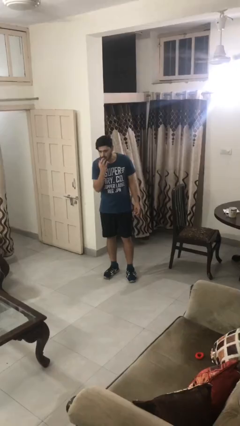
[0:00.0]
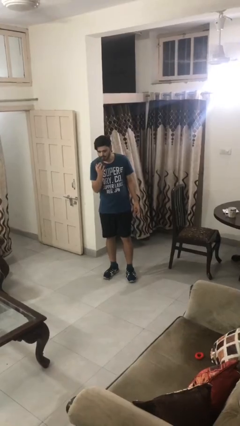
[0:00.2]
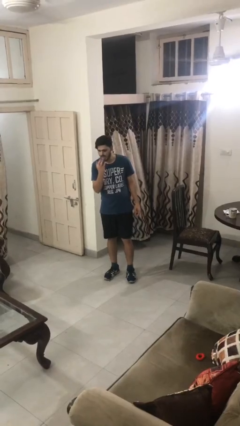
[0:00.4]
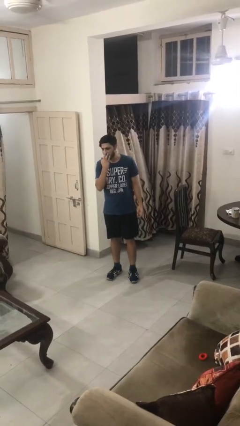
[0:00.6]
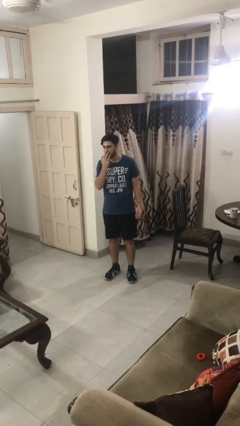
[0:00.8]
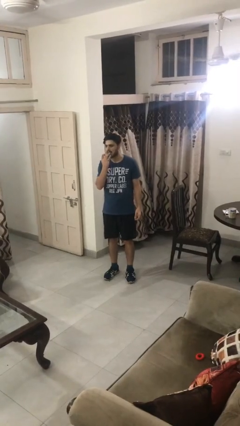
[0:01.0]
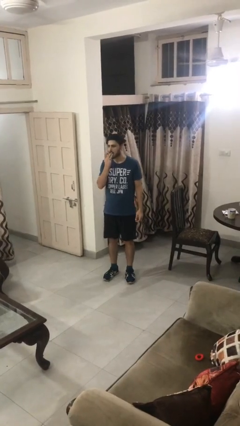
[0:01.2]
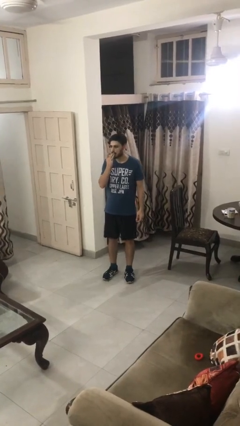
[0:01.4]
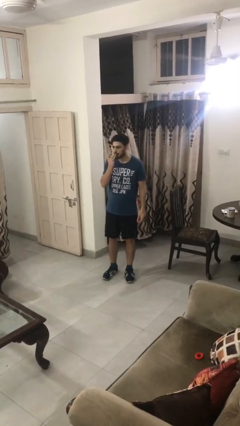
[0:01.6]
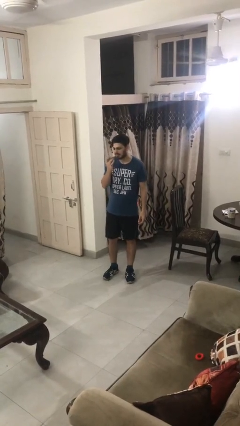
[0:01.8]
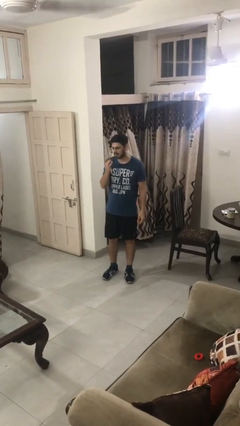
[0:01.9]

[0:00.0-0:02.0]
person licks fingers

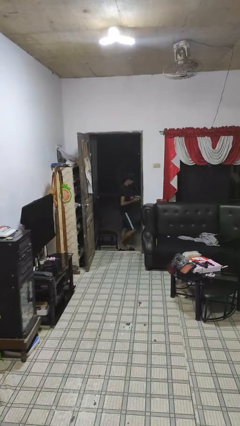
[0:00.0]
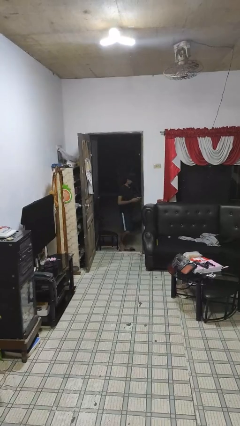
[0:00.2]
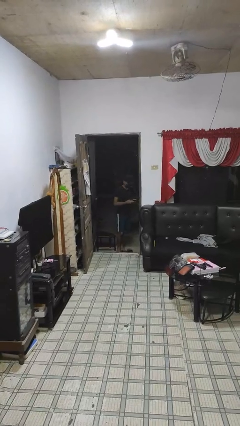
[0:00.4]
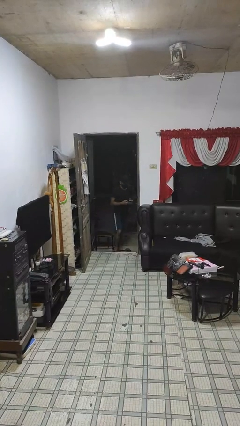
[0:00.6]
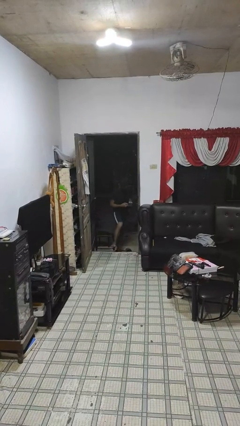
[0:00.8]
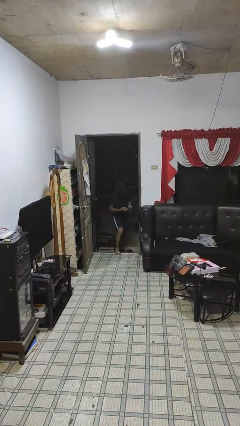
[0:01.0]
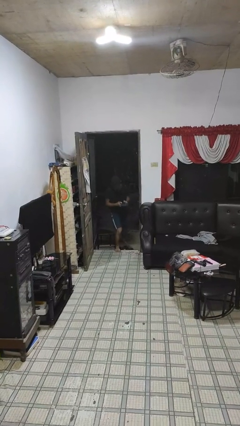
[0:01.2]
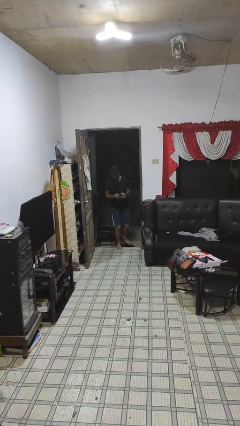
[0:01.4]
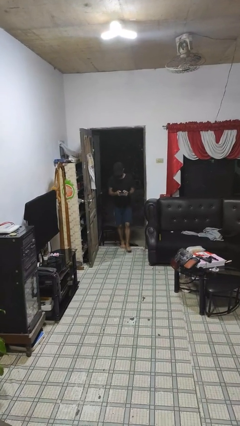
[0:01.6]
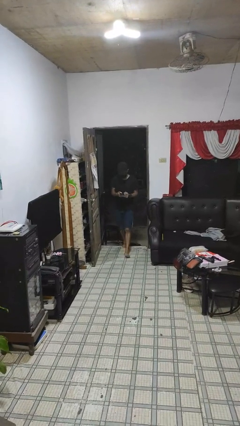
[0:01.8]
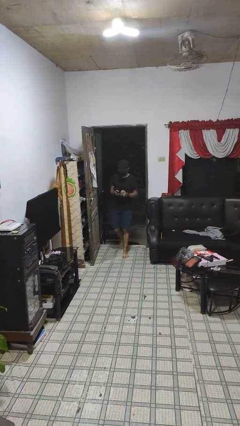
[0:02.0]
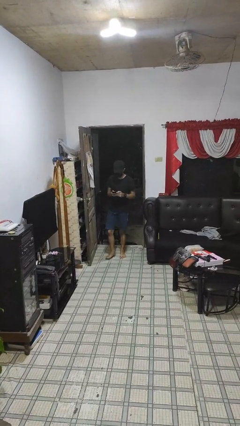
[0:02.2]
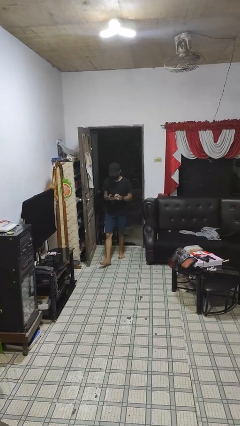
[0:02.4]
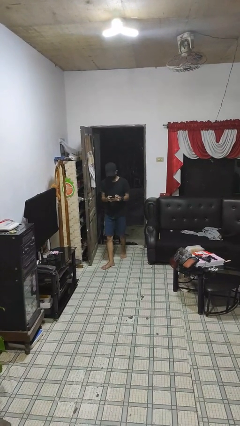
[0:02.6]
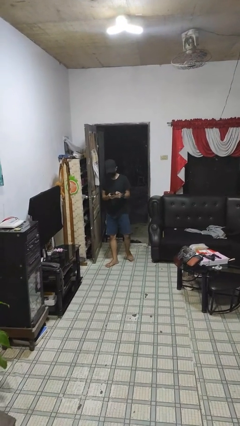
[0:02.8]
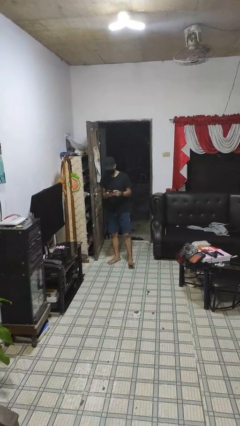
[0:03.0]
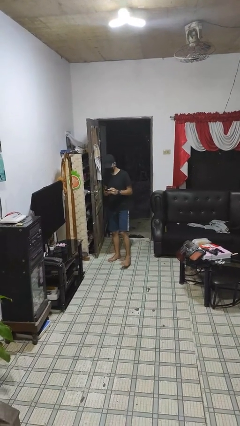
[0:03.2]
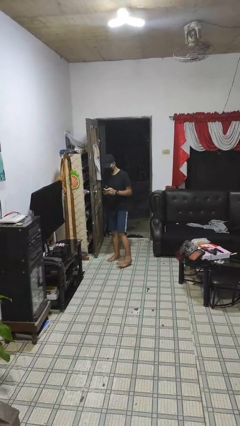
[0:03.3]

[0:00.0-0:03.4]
person enters scene through structure

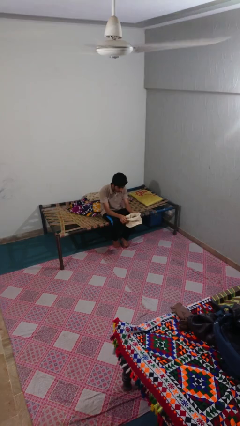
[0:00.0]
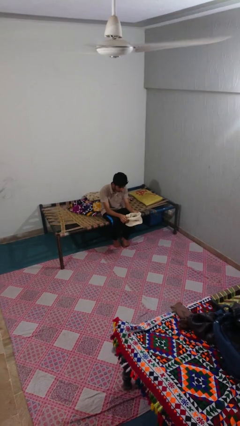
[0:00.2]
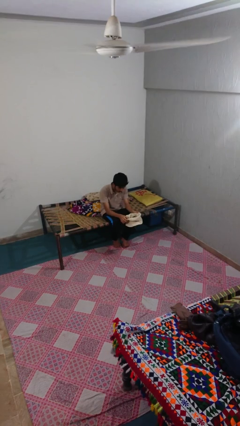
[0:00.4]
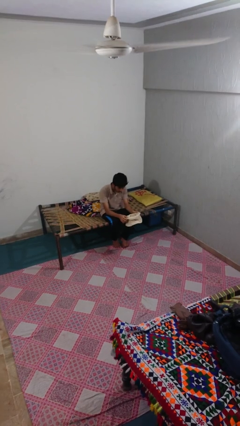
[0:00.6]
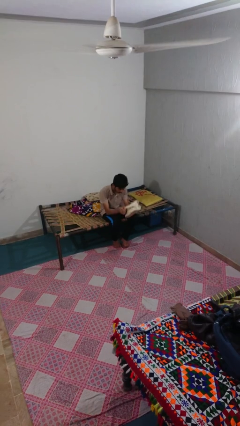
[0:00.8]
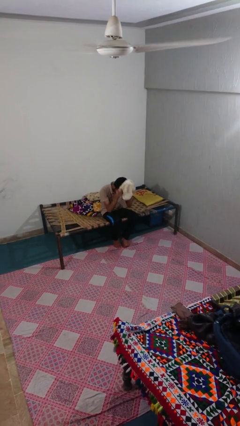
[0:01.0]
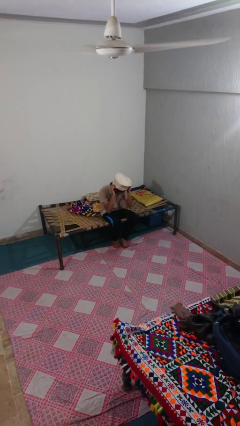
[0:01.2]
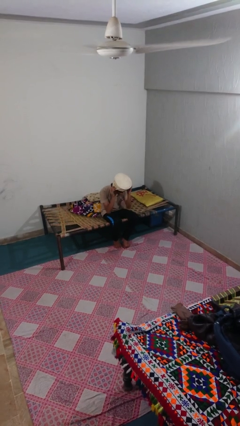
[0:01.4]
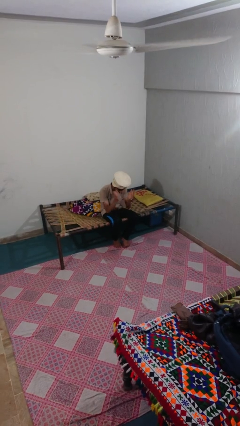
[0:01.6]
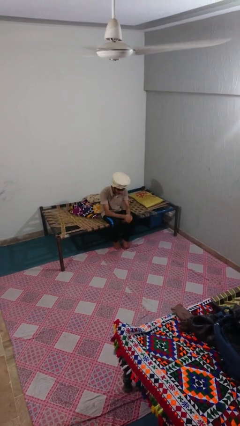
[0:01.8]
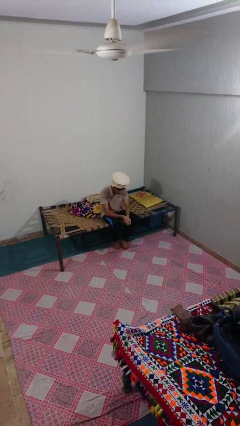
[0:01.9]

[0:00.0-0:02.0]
person puts on hat

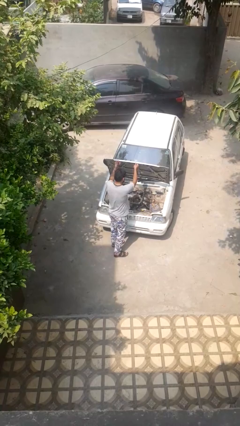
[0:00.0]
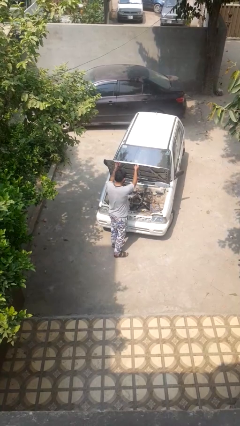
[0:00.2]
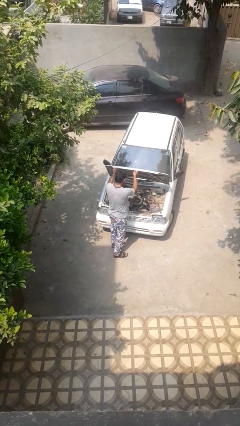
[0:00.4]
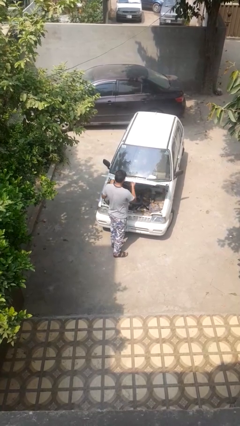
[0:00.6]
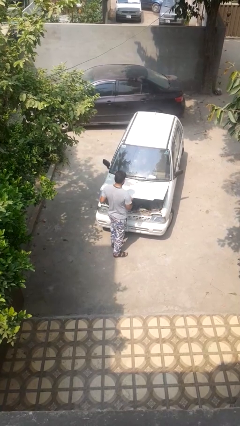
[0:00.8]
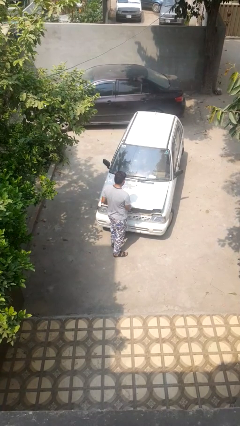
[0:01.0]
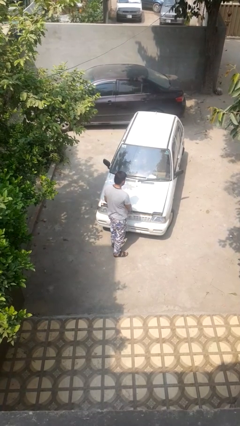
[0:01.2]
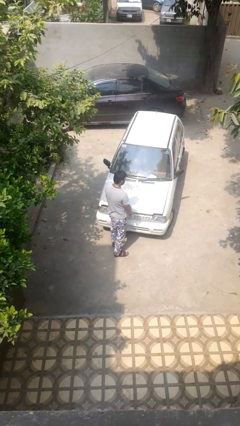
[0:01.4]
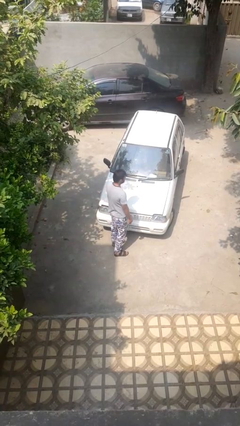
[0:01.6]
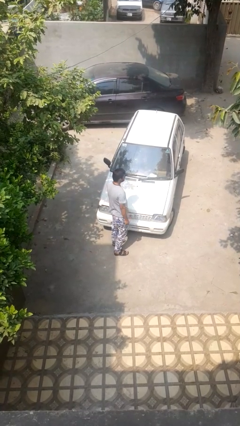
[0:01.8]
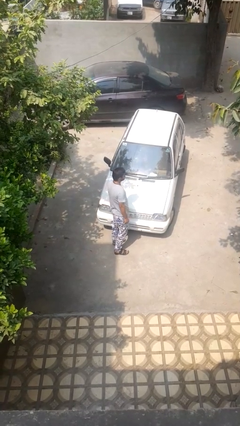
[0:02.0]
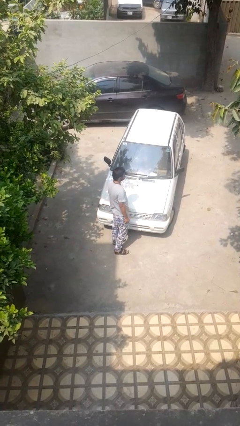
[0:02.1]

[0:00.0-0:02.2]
person closes car hood

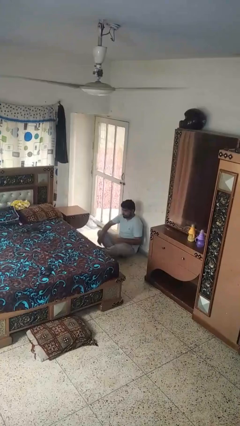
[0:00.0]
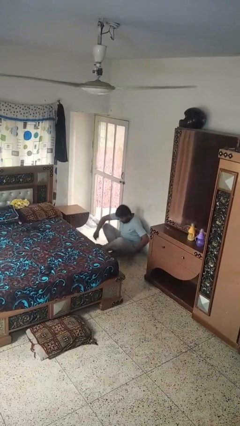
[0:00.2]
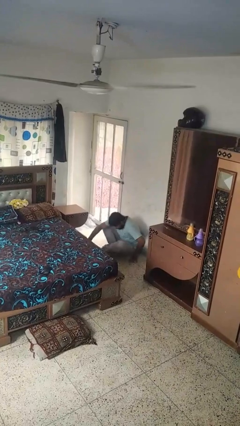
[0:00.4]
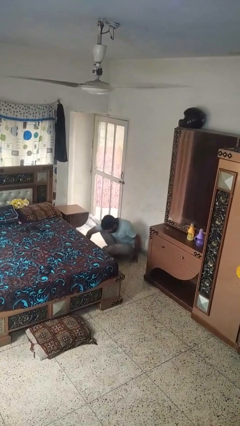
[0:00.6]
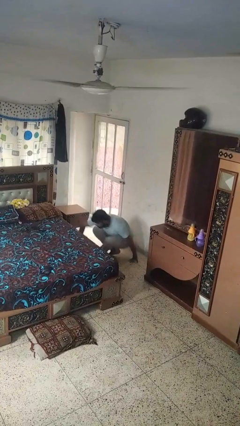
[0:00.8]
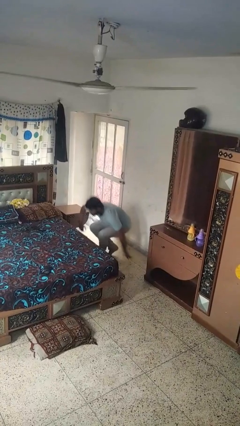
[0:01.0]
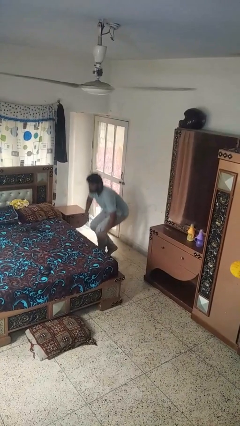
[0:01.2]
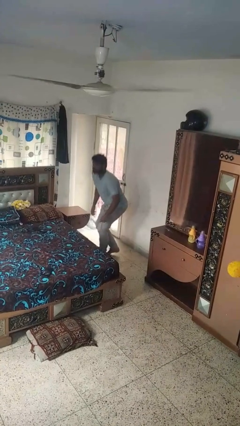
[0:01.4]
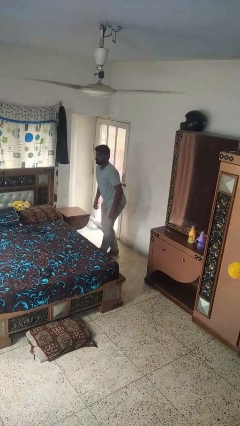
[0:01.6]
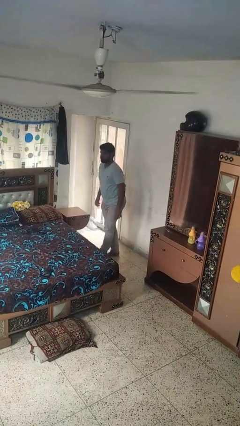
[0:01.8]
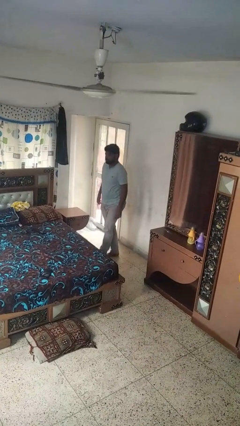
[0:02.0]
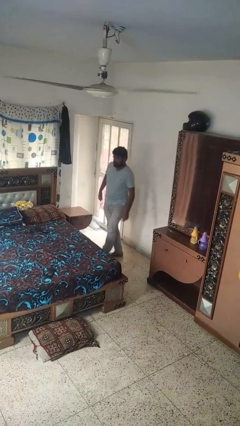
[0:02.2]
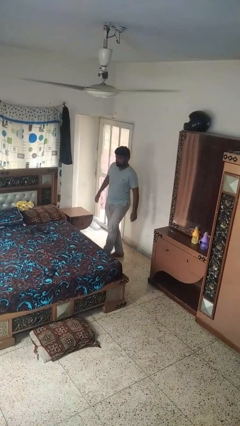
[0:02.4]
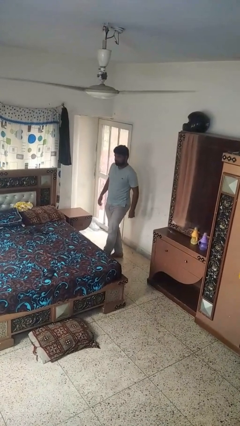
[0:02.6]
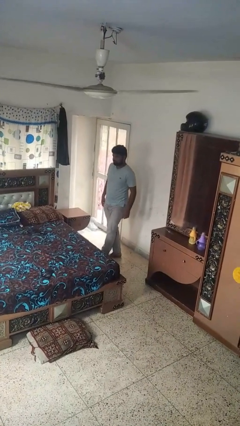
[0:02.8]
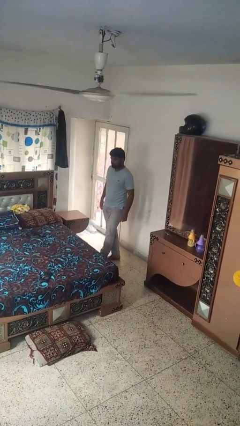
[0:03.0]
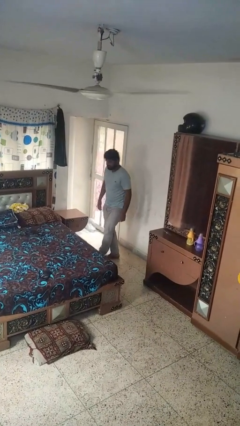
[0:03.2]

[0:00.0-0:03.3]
person stands up from floor

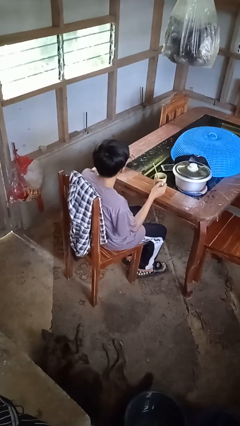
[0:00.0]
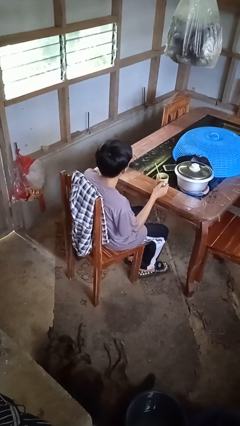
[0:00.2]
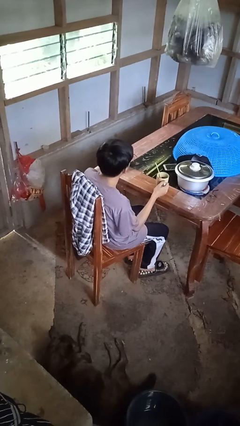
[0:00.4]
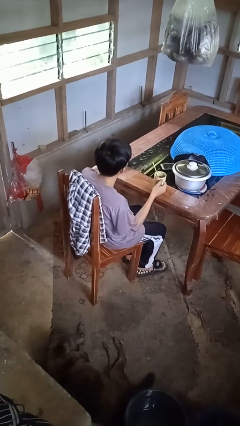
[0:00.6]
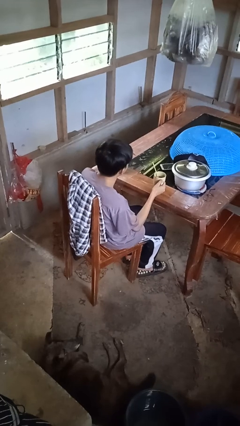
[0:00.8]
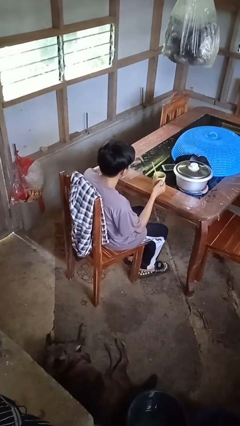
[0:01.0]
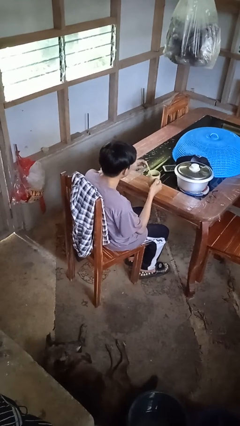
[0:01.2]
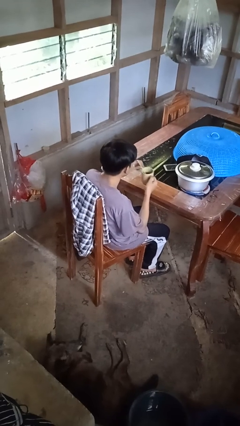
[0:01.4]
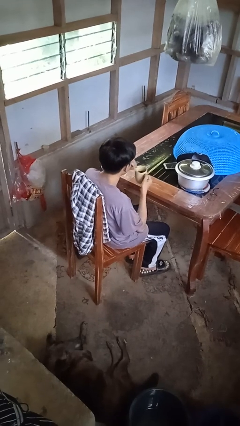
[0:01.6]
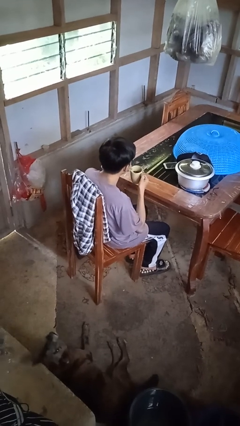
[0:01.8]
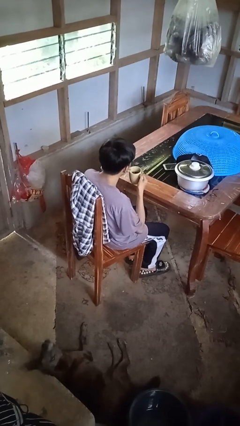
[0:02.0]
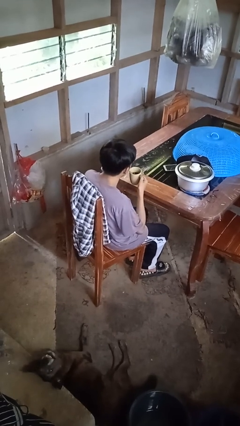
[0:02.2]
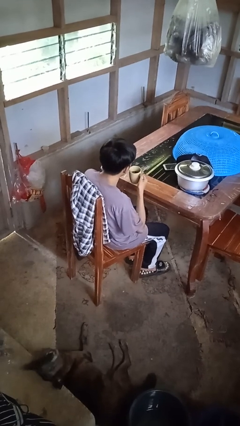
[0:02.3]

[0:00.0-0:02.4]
person drinks from straw

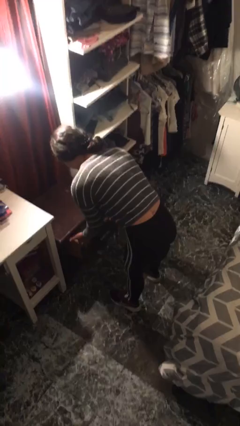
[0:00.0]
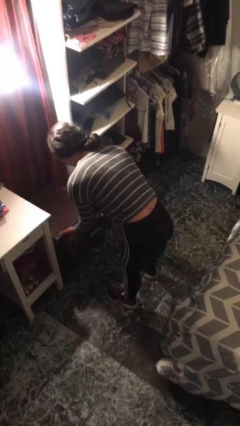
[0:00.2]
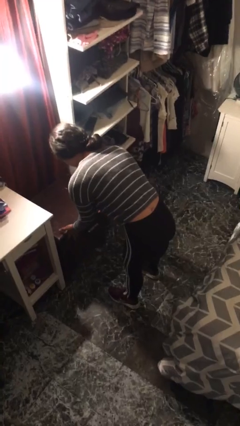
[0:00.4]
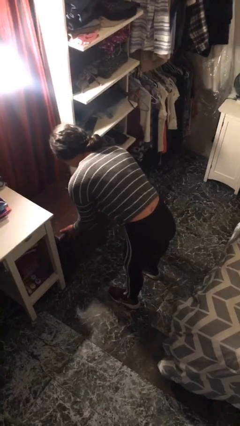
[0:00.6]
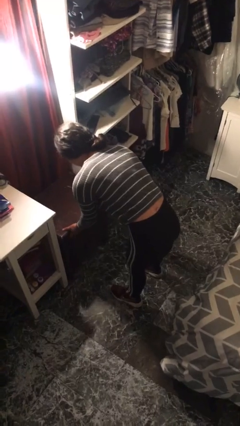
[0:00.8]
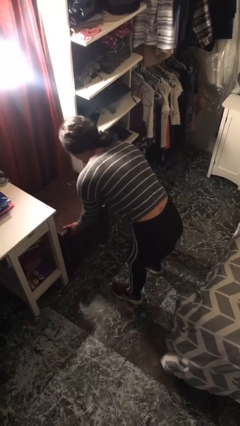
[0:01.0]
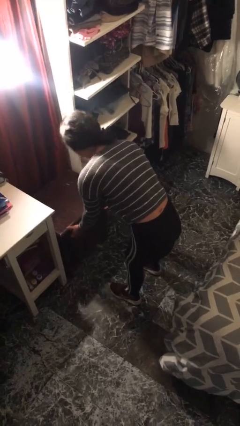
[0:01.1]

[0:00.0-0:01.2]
person closes dresser drawer

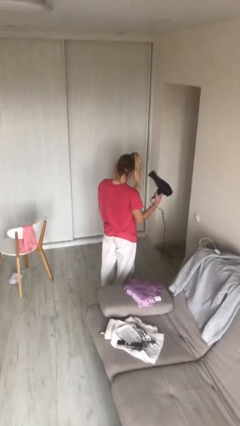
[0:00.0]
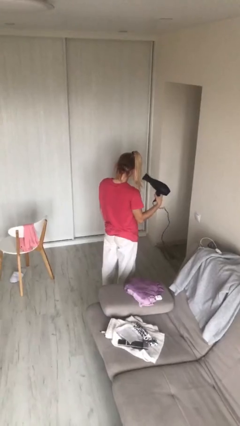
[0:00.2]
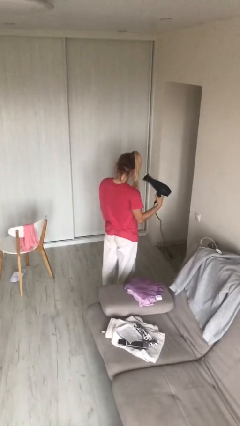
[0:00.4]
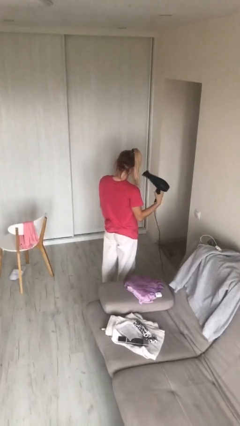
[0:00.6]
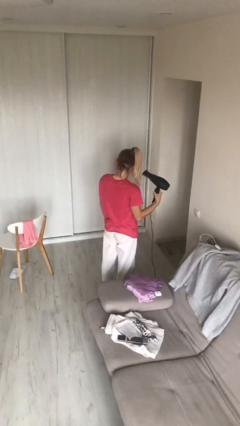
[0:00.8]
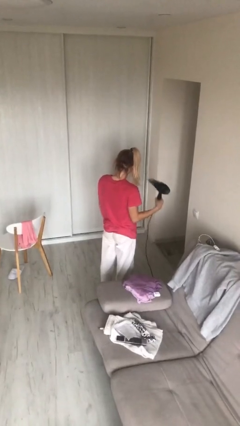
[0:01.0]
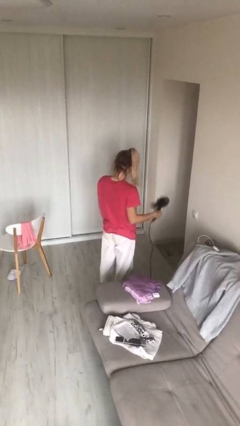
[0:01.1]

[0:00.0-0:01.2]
person dries hair with hairdryer
